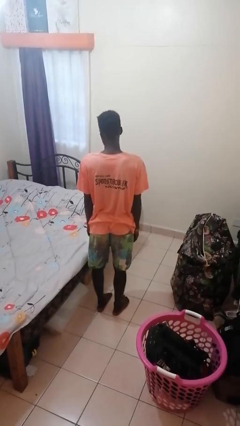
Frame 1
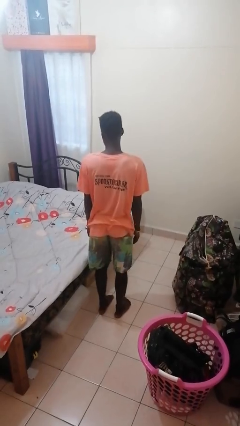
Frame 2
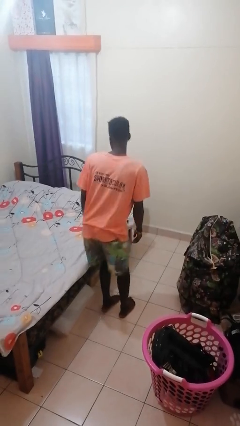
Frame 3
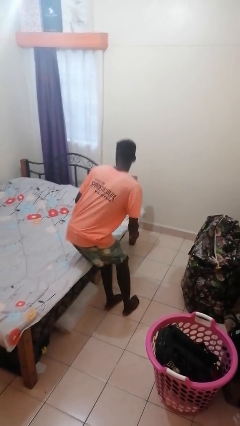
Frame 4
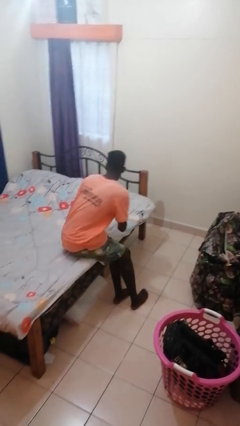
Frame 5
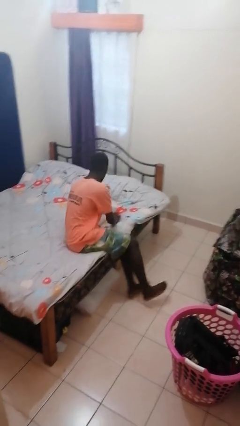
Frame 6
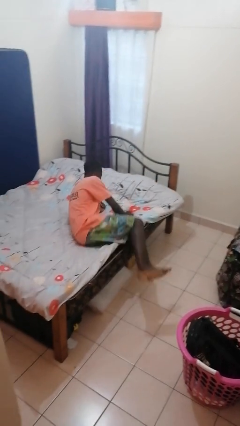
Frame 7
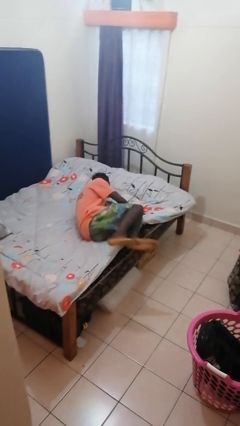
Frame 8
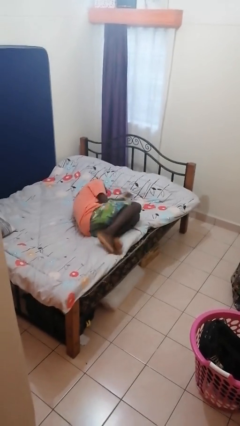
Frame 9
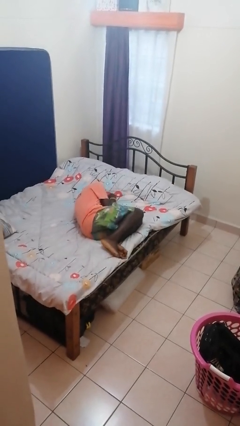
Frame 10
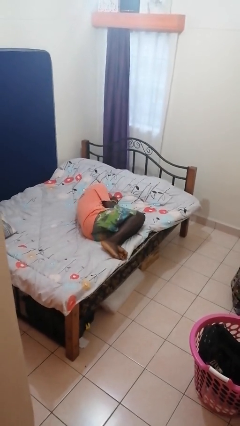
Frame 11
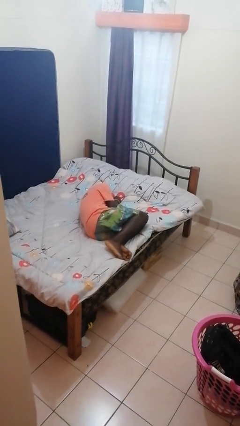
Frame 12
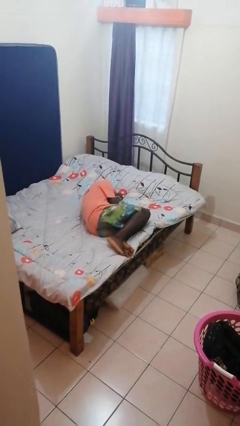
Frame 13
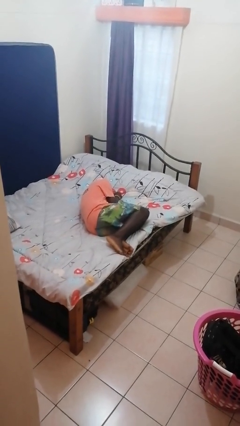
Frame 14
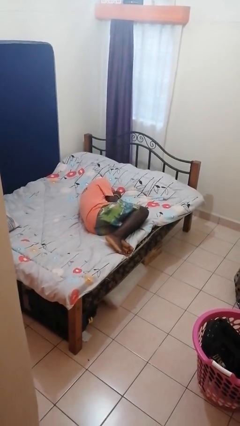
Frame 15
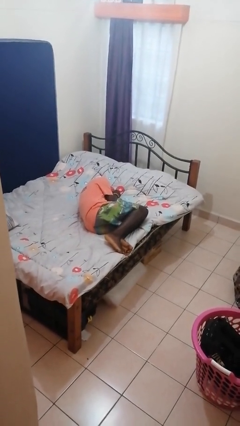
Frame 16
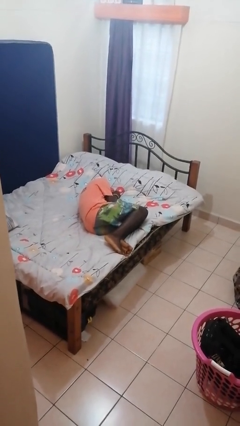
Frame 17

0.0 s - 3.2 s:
person lies down on bed

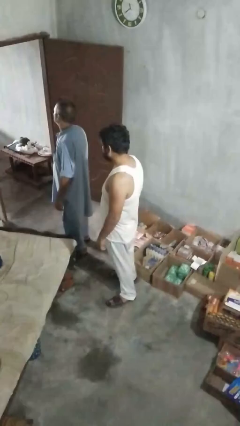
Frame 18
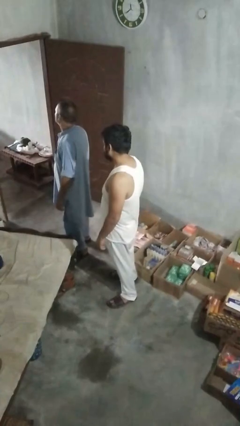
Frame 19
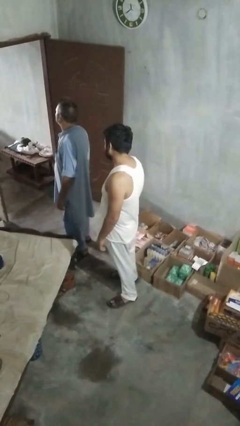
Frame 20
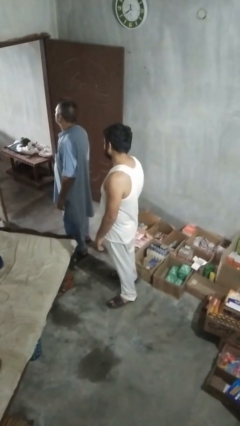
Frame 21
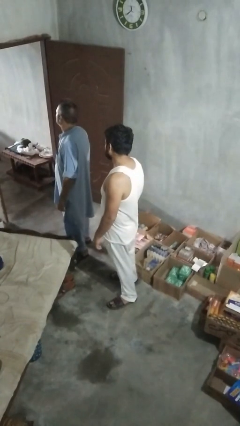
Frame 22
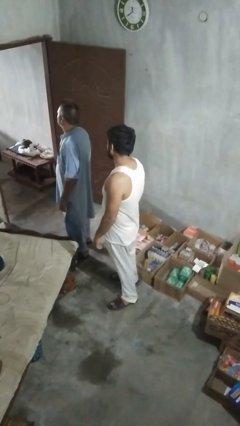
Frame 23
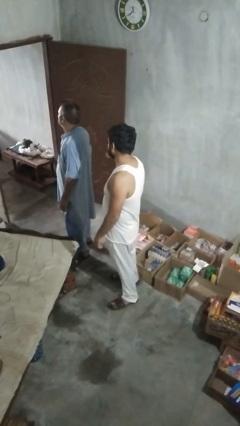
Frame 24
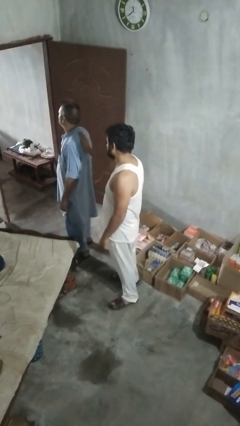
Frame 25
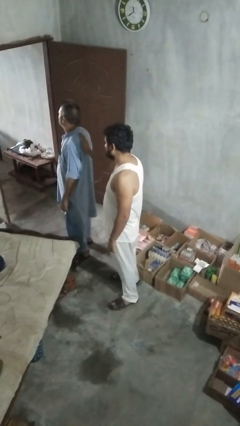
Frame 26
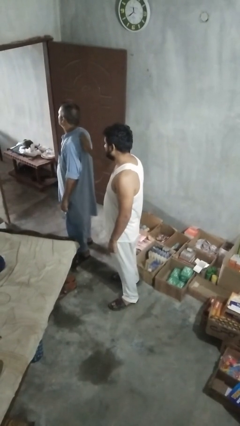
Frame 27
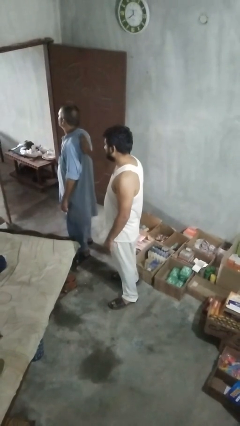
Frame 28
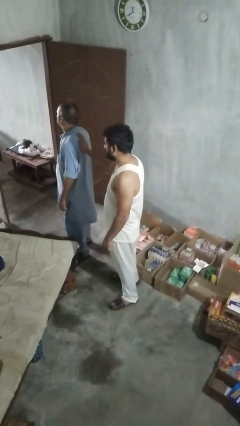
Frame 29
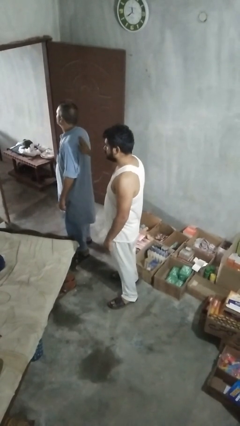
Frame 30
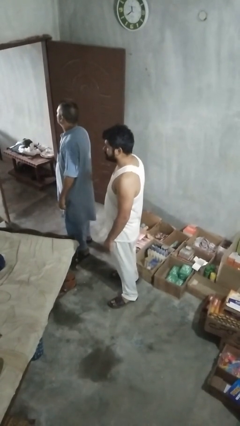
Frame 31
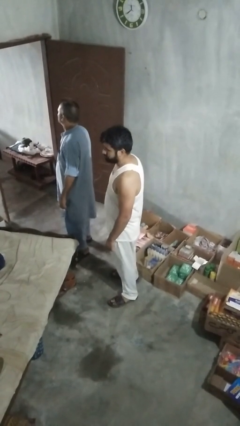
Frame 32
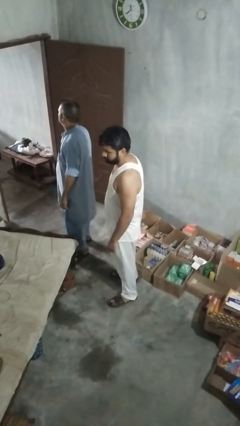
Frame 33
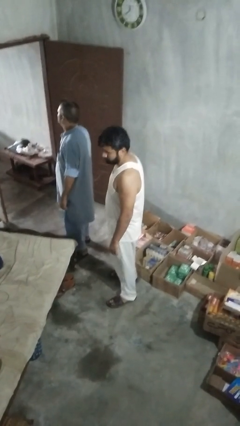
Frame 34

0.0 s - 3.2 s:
person touches back of person

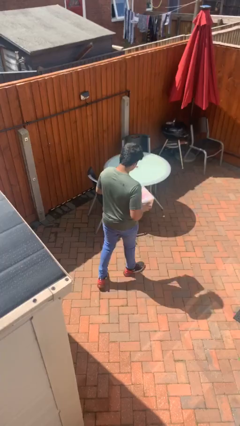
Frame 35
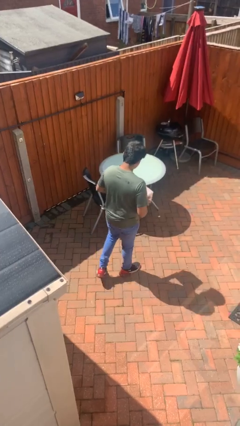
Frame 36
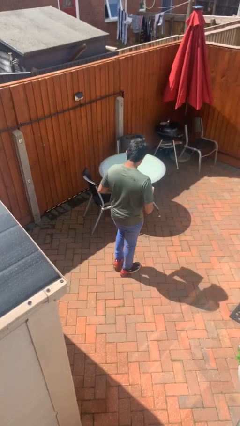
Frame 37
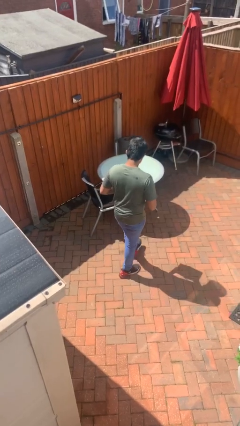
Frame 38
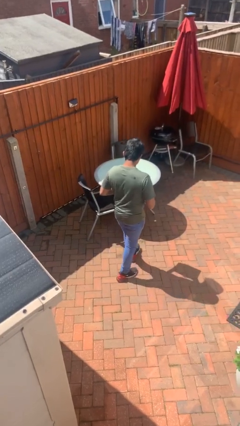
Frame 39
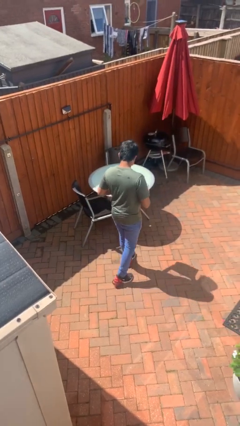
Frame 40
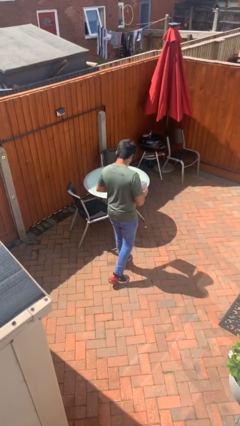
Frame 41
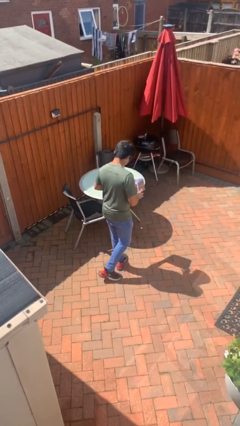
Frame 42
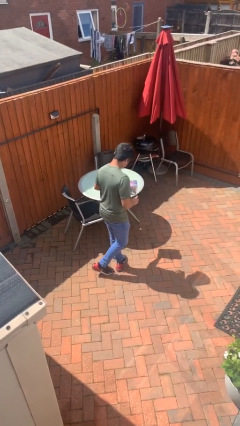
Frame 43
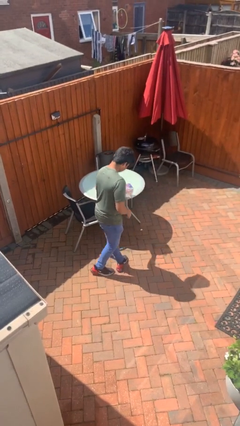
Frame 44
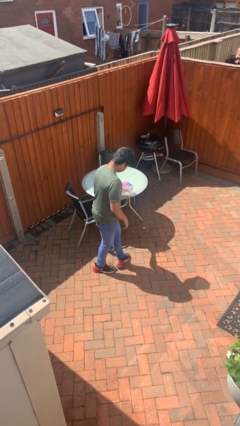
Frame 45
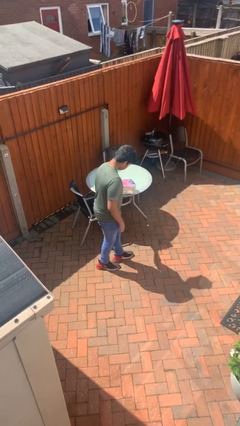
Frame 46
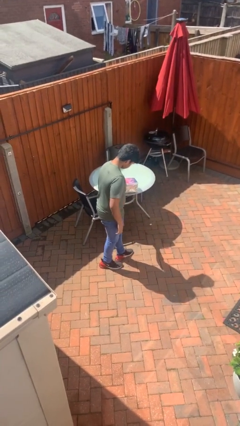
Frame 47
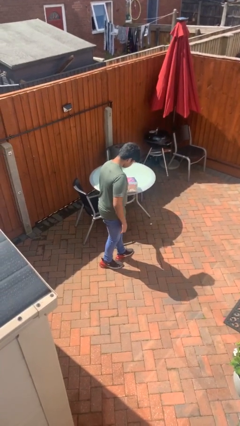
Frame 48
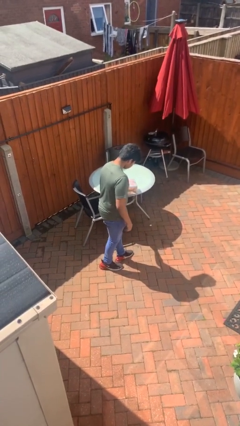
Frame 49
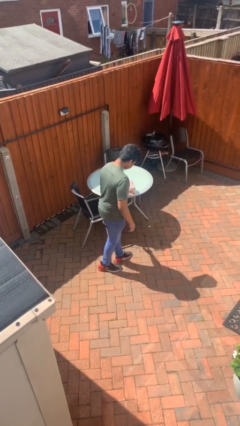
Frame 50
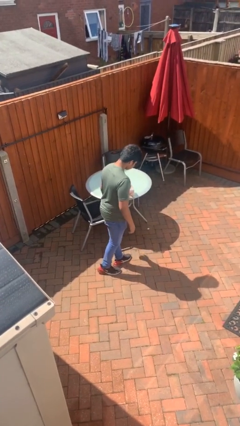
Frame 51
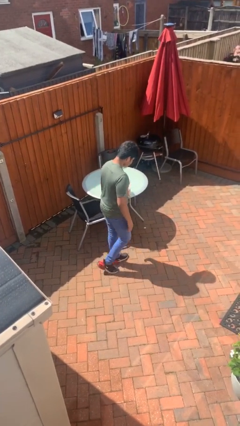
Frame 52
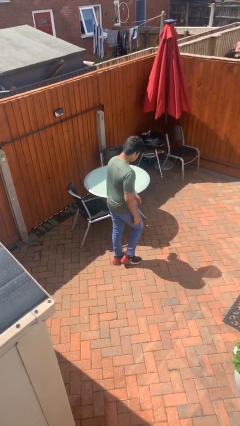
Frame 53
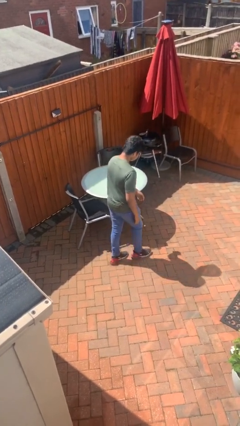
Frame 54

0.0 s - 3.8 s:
person puts down object on table

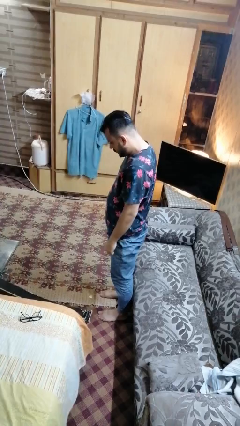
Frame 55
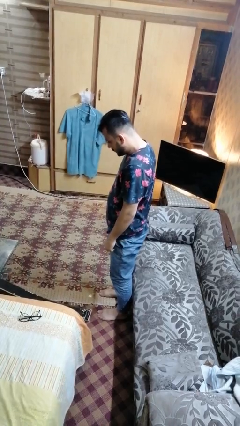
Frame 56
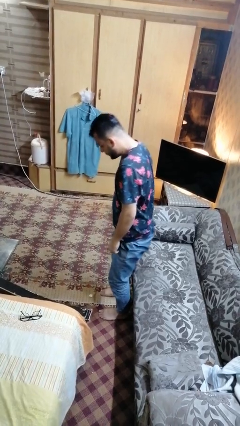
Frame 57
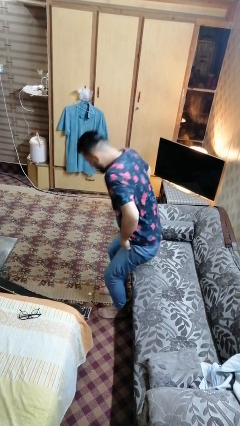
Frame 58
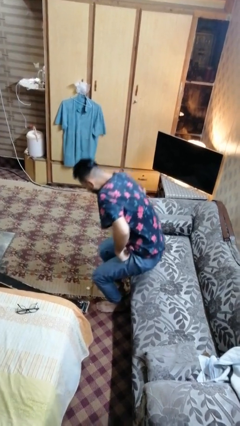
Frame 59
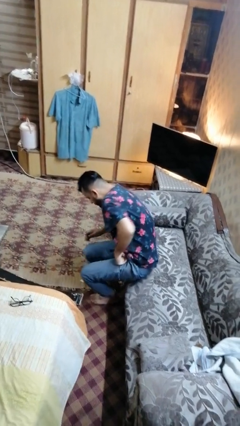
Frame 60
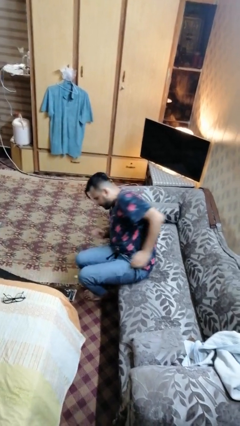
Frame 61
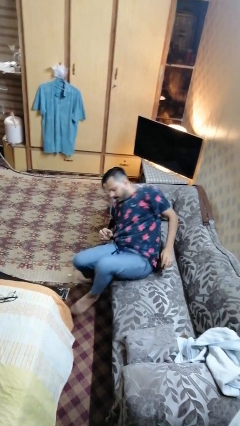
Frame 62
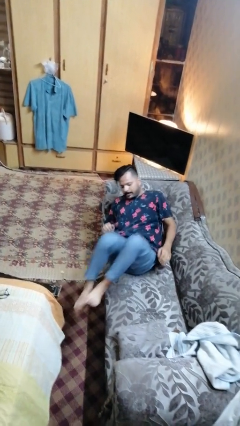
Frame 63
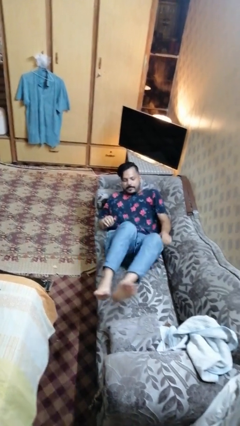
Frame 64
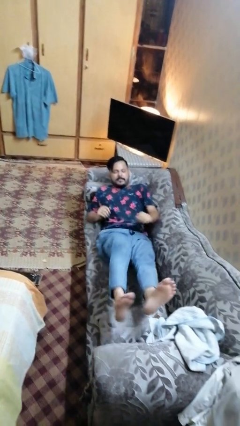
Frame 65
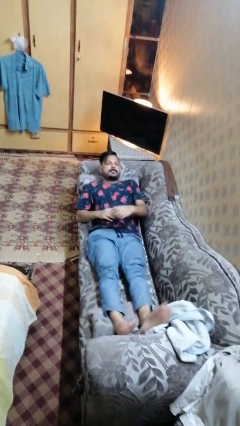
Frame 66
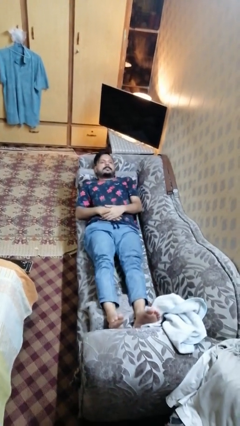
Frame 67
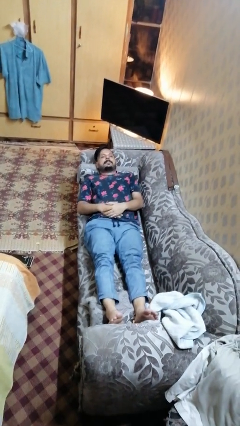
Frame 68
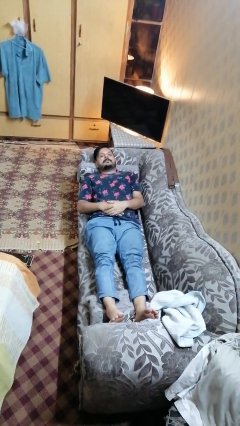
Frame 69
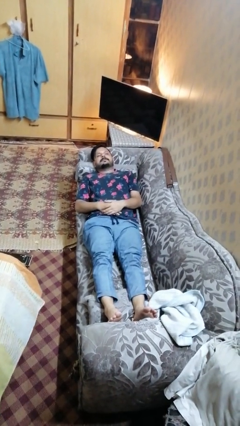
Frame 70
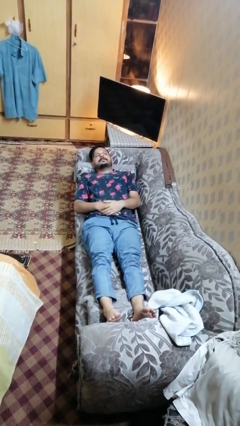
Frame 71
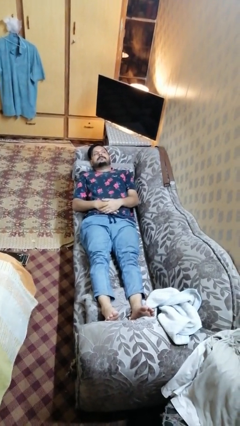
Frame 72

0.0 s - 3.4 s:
person lies down on couch

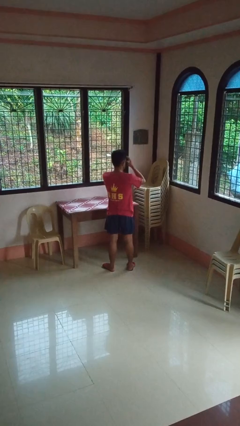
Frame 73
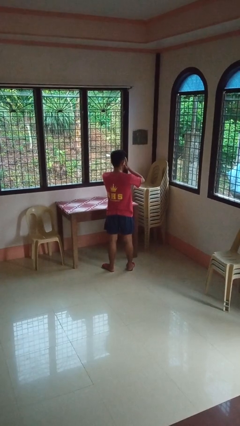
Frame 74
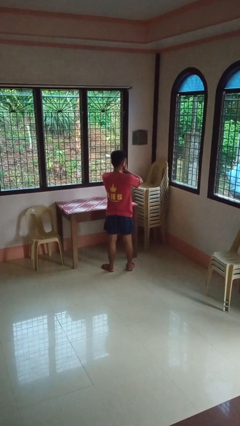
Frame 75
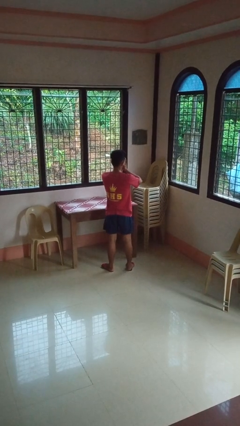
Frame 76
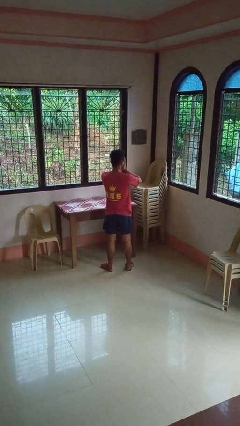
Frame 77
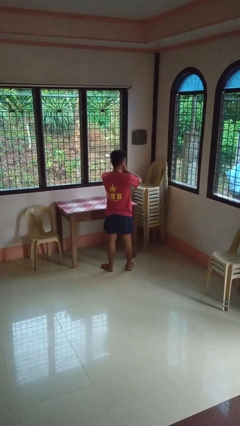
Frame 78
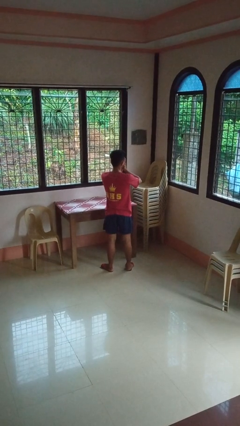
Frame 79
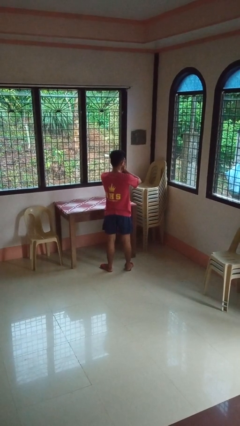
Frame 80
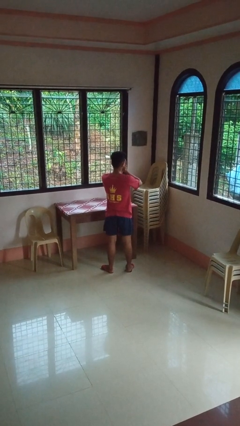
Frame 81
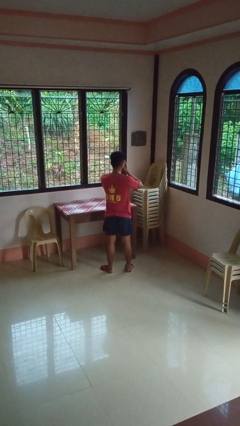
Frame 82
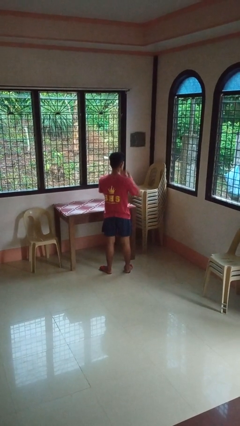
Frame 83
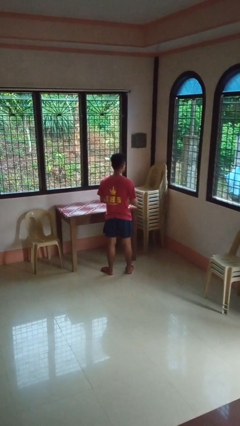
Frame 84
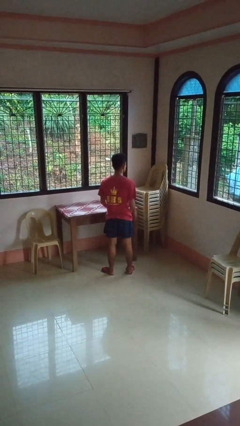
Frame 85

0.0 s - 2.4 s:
person covers face with hands

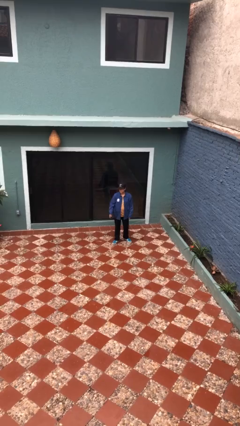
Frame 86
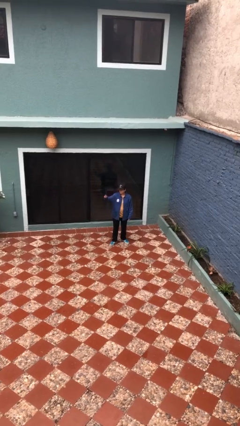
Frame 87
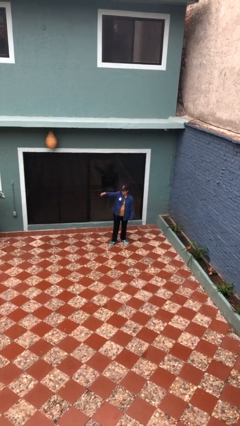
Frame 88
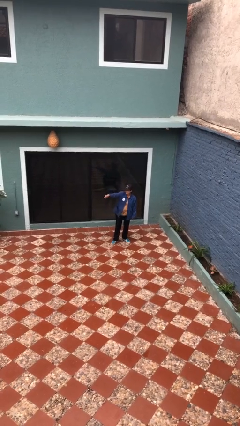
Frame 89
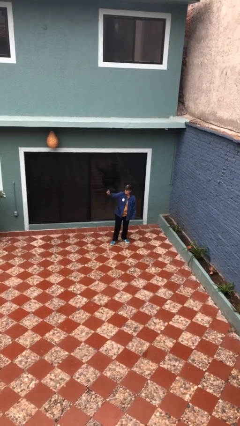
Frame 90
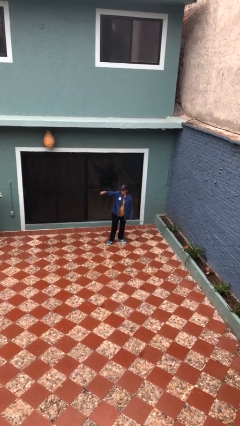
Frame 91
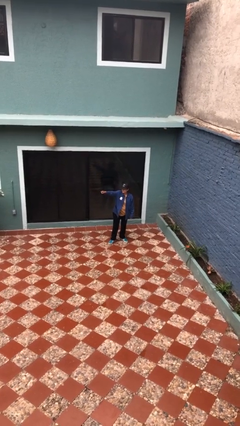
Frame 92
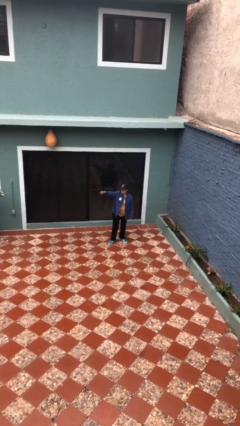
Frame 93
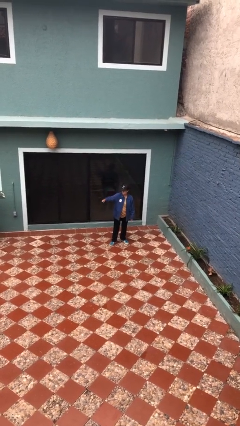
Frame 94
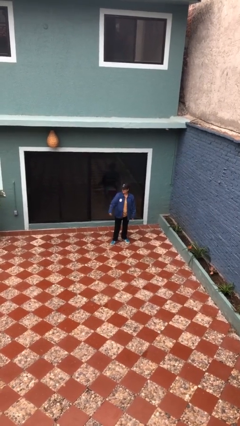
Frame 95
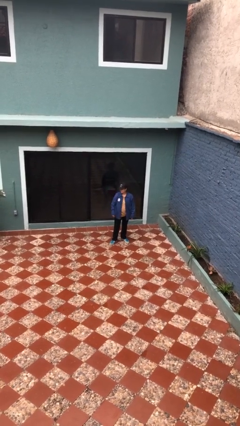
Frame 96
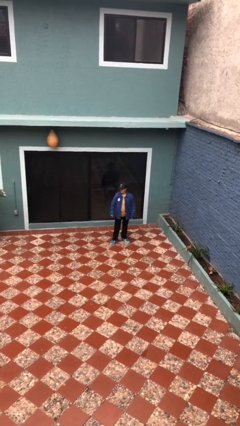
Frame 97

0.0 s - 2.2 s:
person points at person
